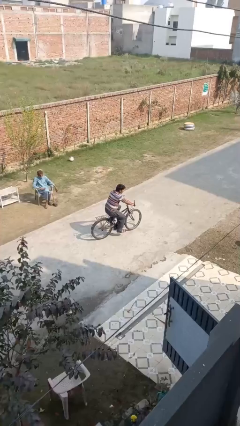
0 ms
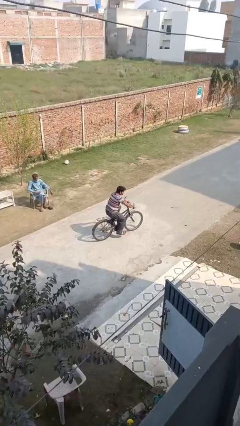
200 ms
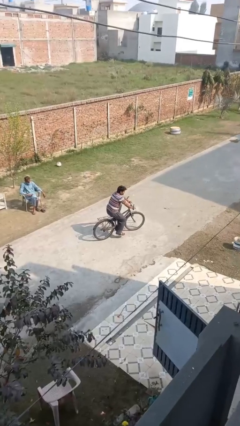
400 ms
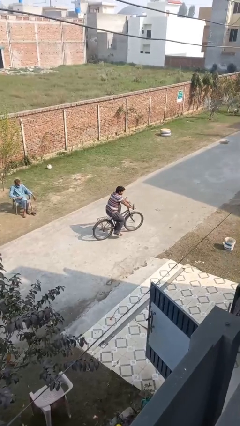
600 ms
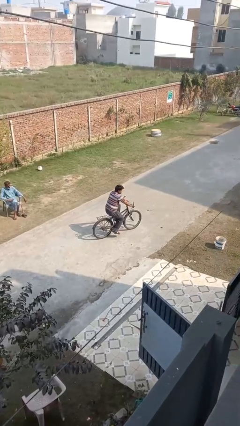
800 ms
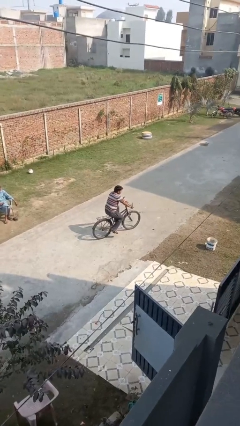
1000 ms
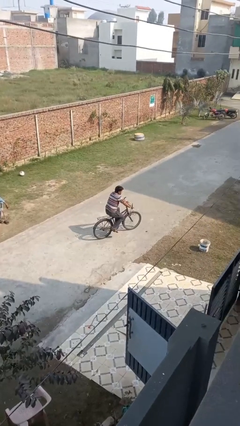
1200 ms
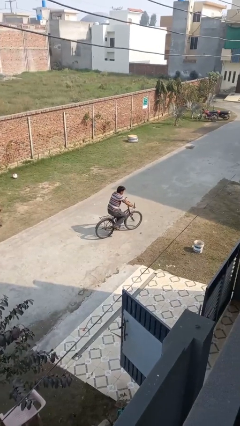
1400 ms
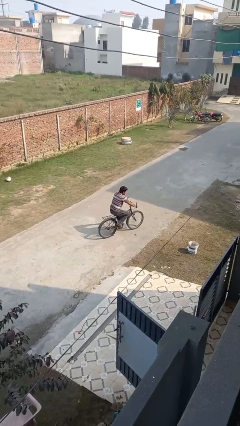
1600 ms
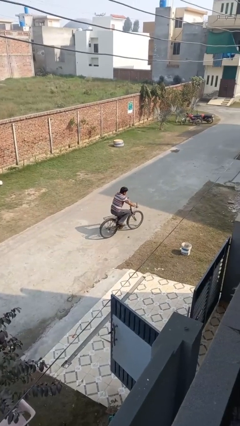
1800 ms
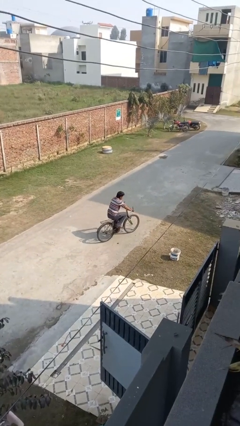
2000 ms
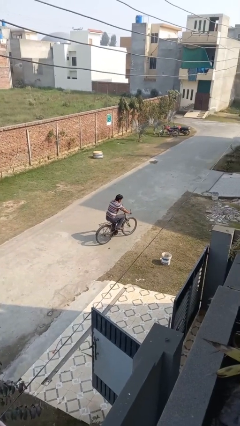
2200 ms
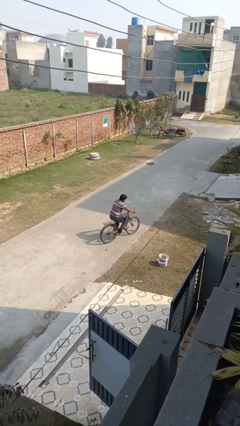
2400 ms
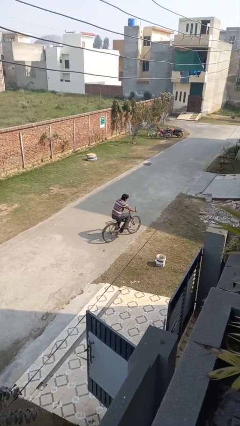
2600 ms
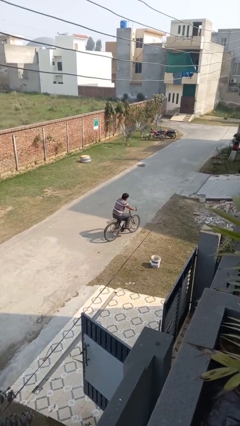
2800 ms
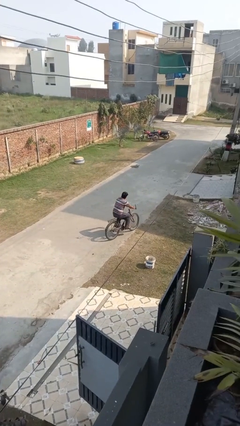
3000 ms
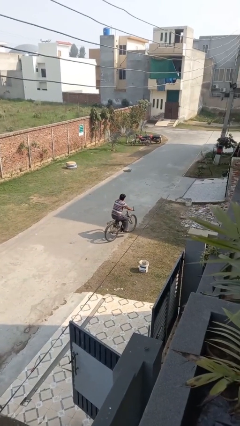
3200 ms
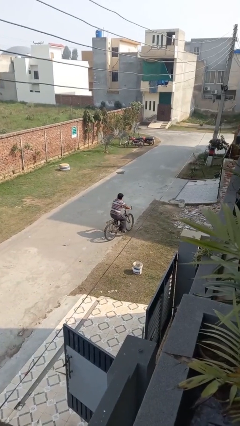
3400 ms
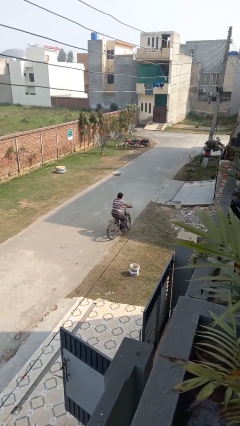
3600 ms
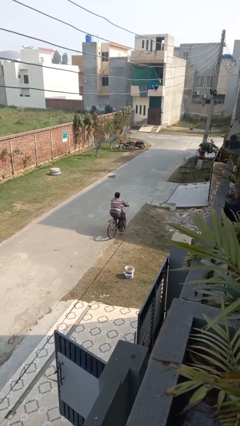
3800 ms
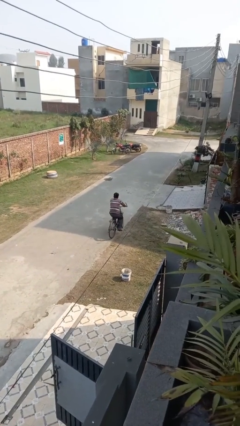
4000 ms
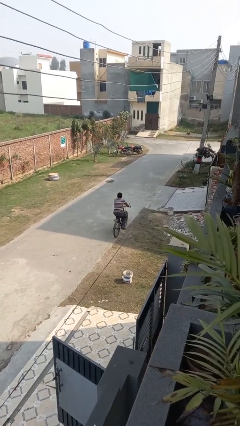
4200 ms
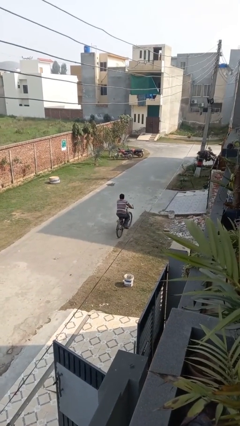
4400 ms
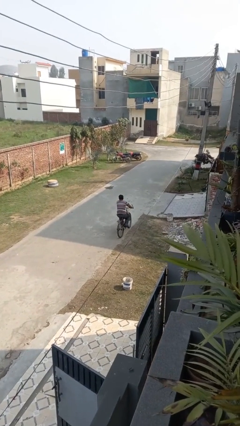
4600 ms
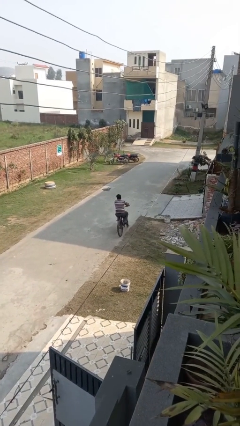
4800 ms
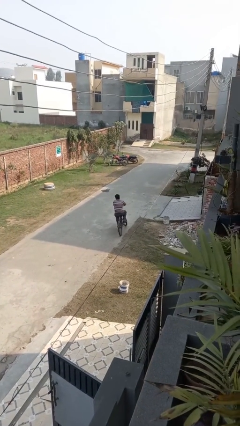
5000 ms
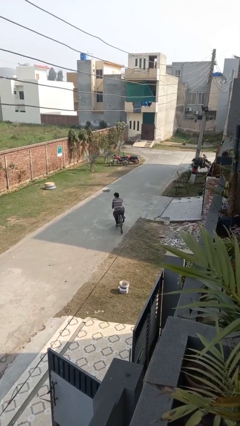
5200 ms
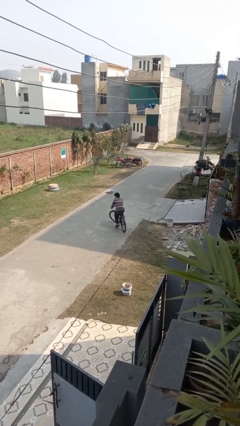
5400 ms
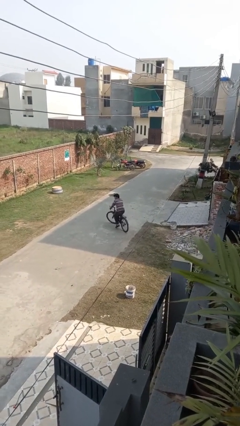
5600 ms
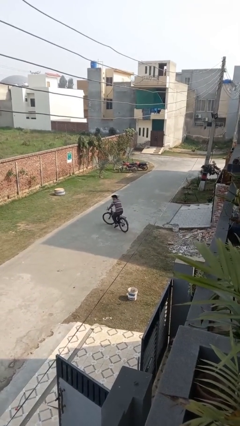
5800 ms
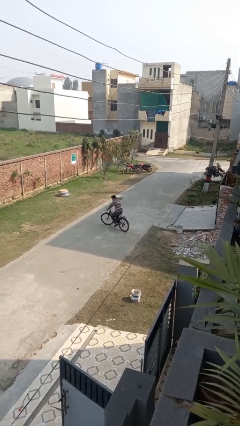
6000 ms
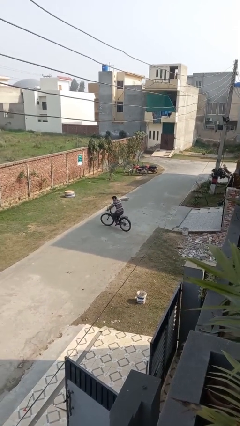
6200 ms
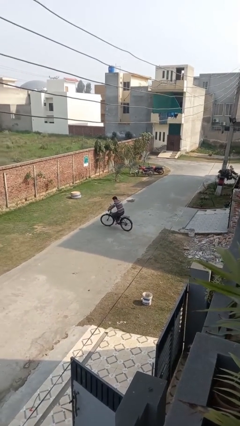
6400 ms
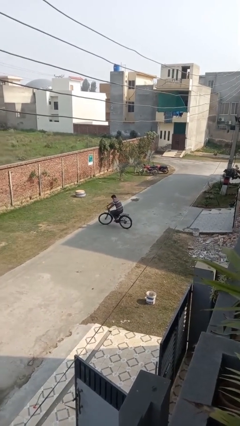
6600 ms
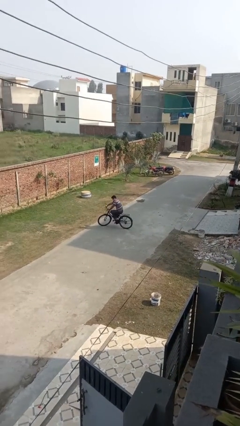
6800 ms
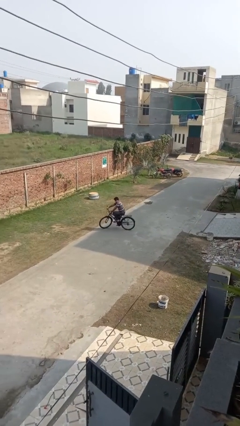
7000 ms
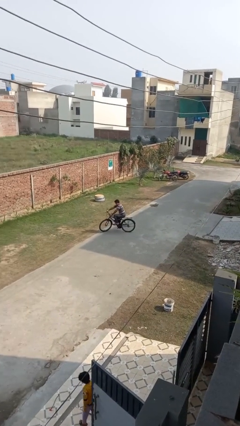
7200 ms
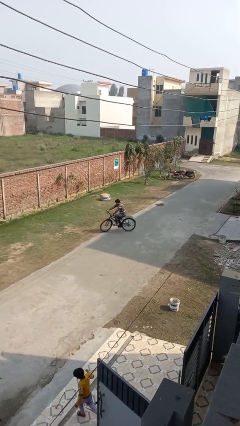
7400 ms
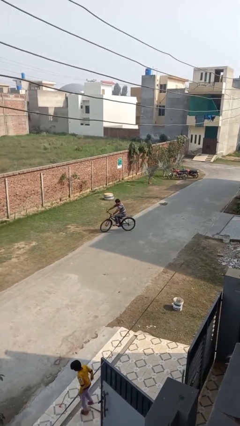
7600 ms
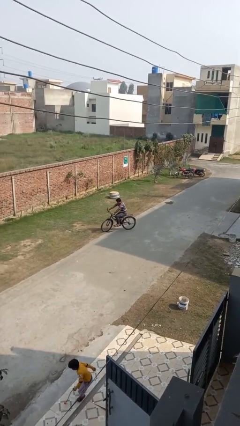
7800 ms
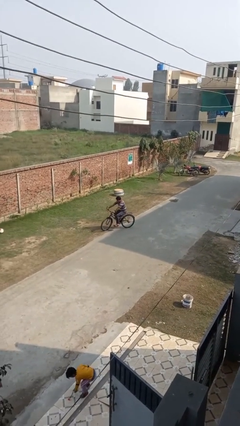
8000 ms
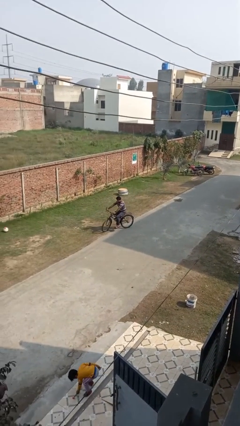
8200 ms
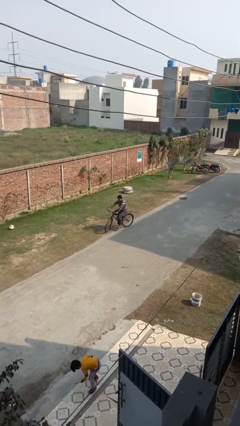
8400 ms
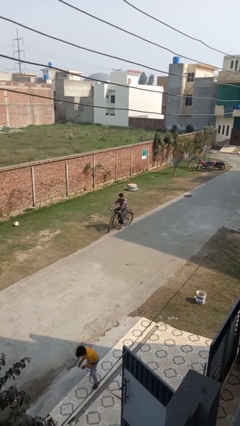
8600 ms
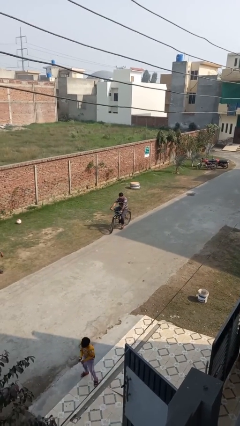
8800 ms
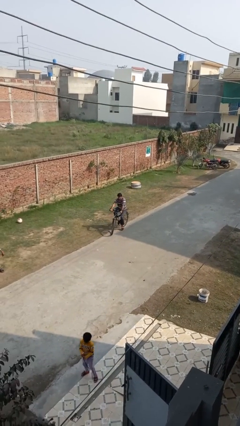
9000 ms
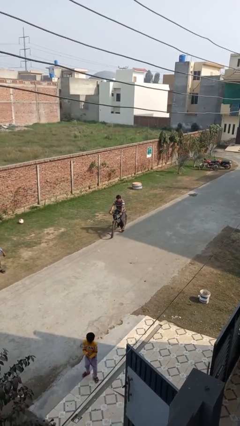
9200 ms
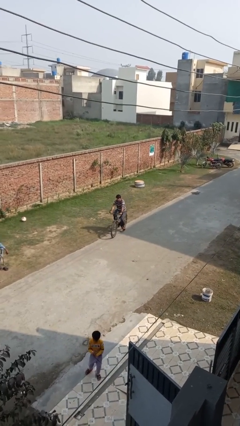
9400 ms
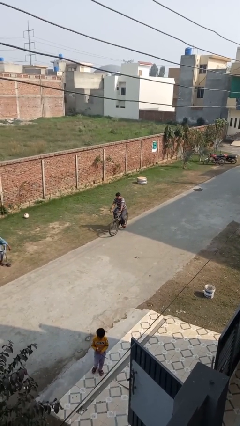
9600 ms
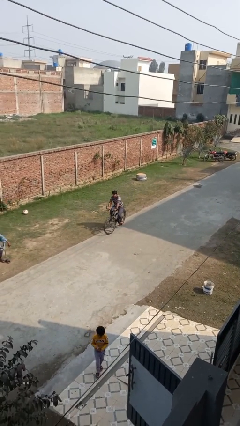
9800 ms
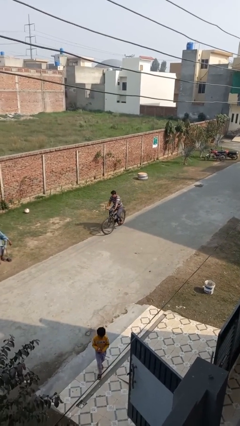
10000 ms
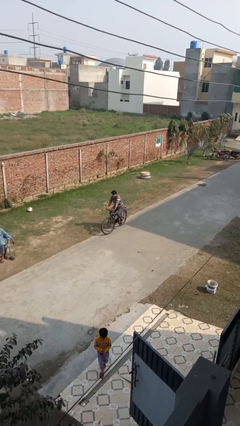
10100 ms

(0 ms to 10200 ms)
person rides bicycle

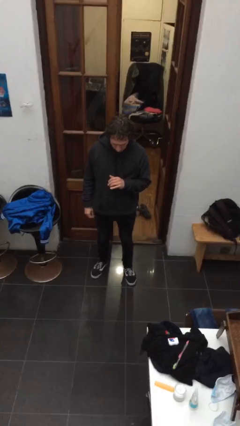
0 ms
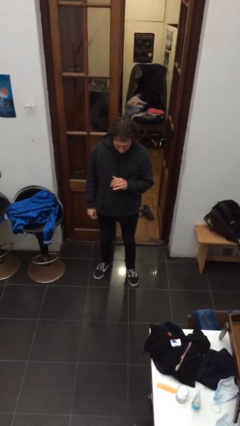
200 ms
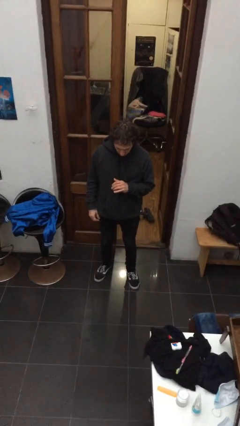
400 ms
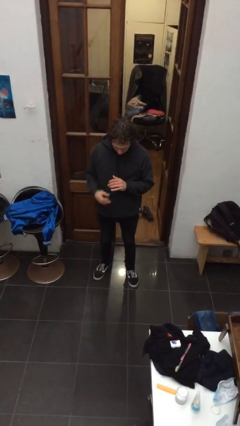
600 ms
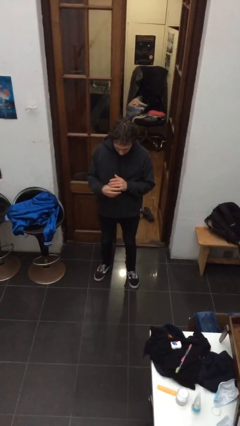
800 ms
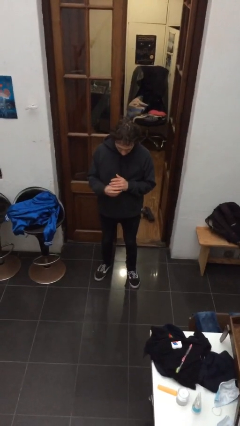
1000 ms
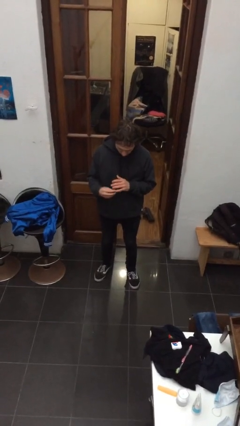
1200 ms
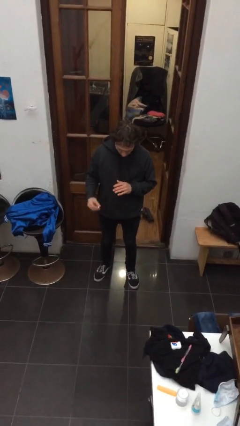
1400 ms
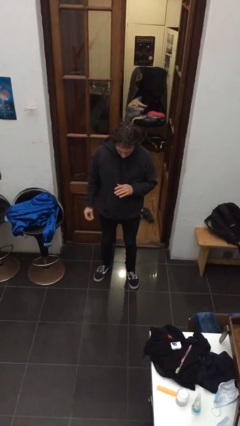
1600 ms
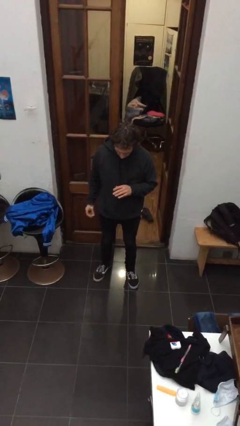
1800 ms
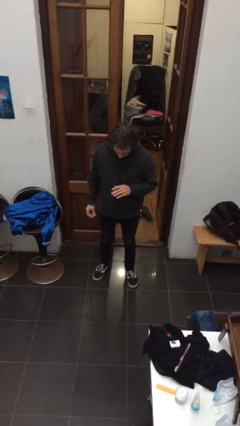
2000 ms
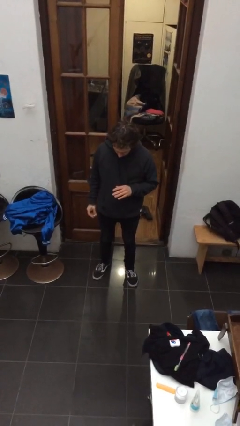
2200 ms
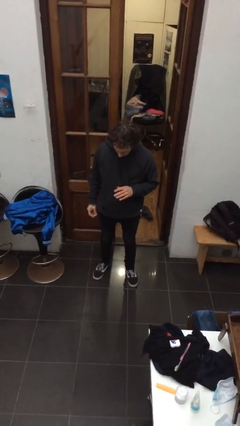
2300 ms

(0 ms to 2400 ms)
person takes off ring

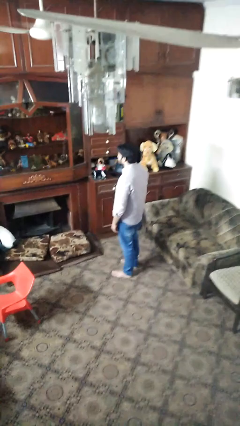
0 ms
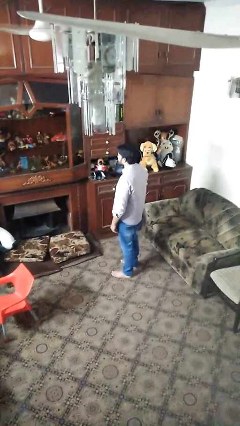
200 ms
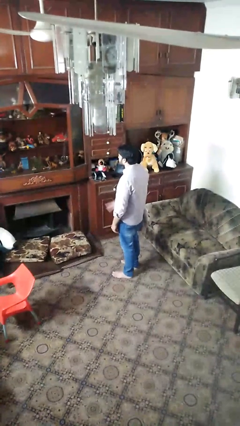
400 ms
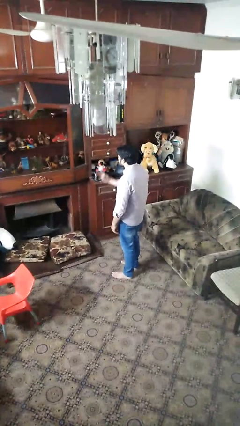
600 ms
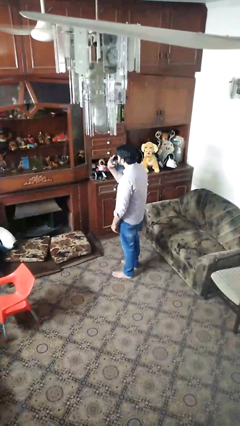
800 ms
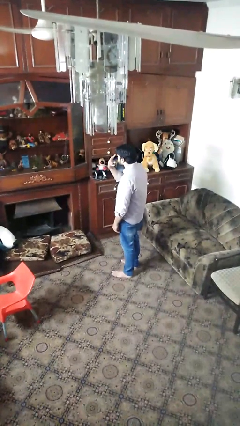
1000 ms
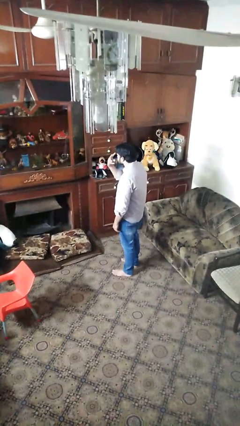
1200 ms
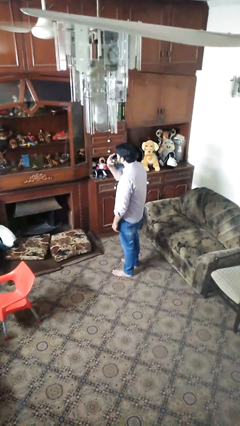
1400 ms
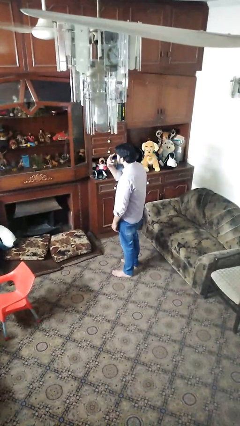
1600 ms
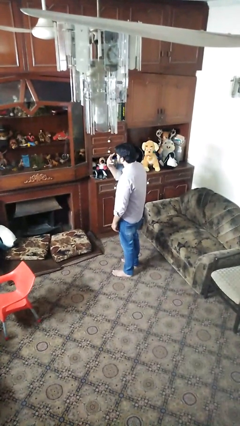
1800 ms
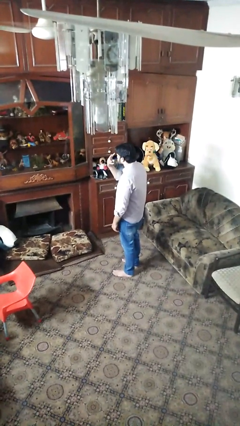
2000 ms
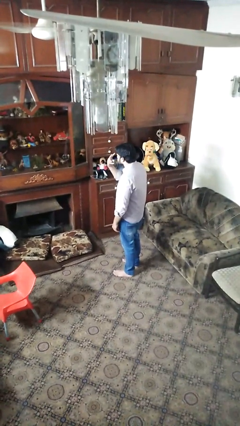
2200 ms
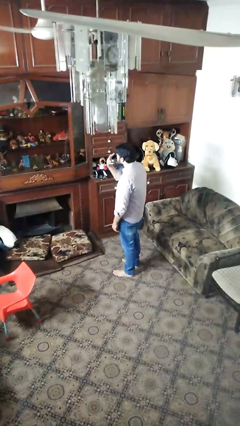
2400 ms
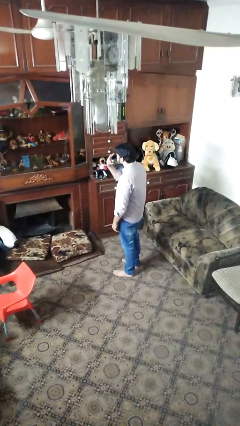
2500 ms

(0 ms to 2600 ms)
person gestures watch closely

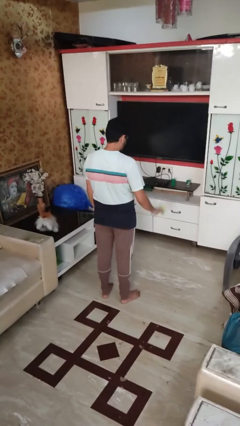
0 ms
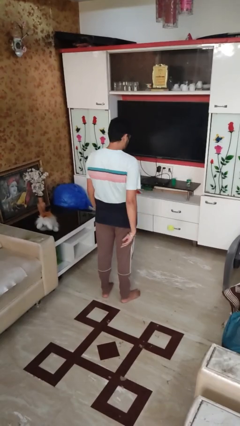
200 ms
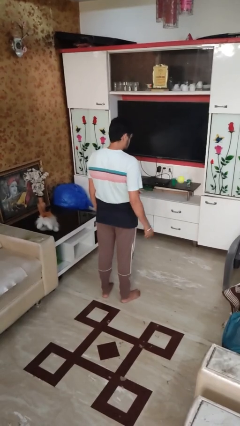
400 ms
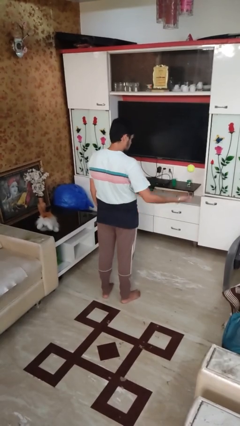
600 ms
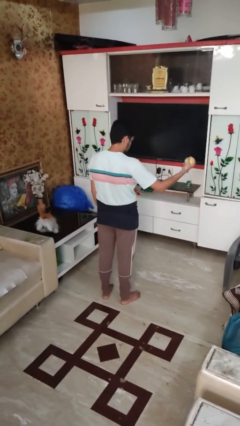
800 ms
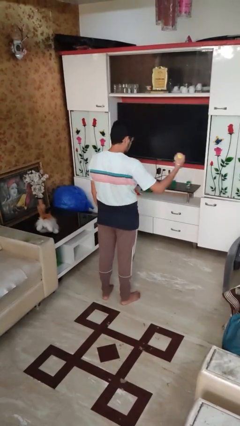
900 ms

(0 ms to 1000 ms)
person bounces ball on floor

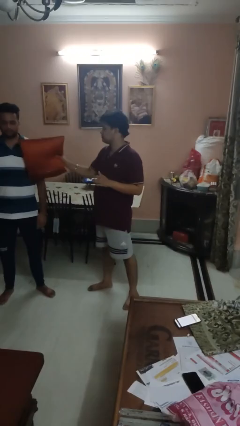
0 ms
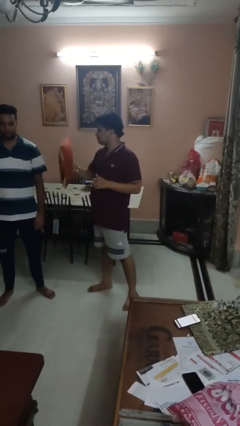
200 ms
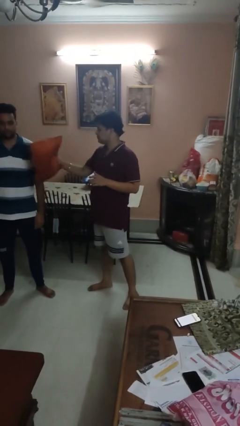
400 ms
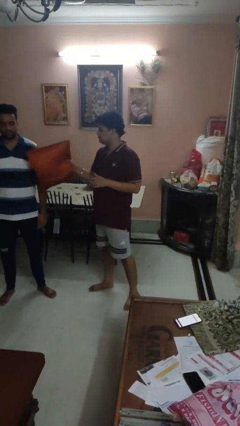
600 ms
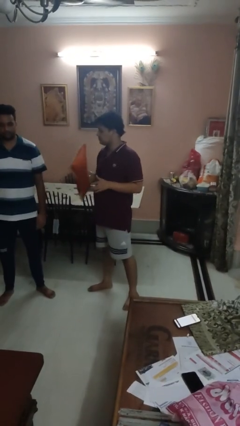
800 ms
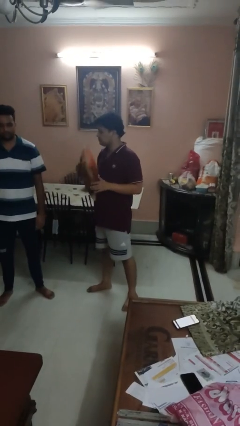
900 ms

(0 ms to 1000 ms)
person hits person with pillow
